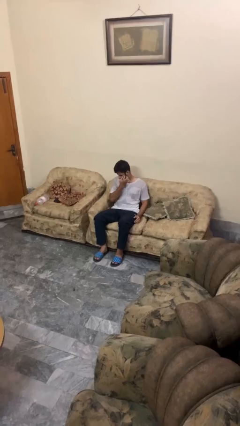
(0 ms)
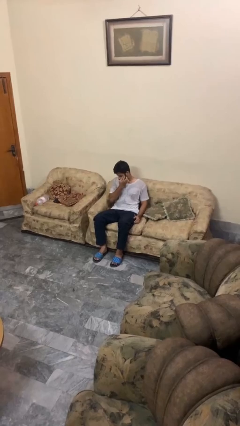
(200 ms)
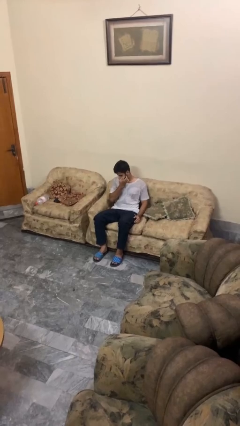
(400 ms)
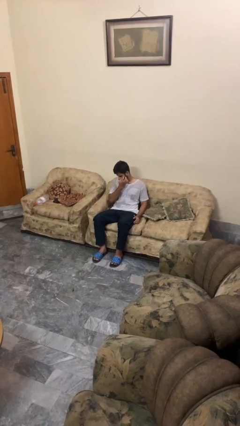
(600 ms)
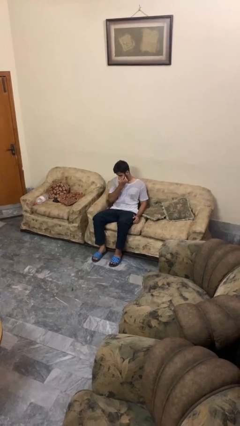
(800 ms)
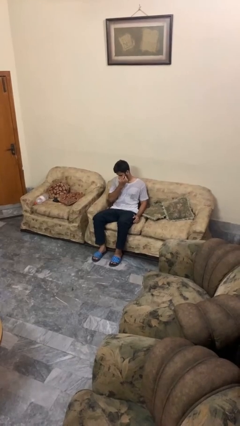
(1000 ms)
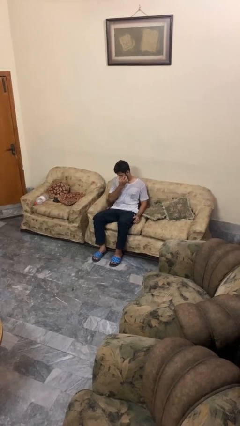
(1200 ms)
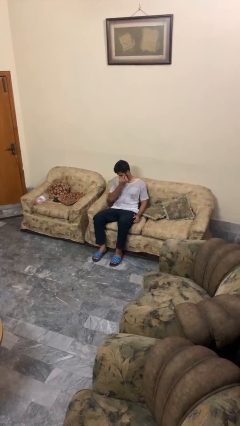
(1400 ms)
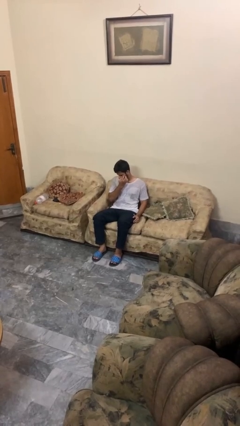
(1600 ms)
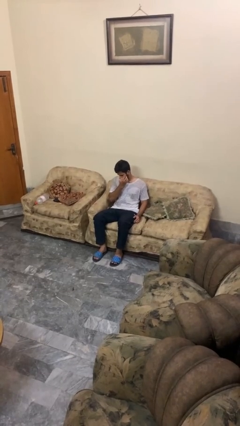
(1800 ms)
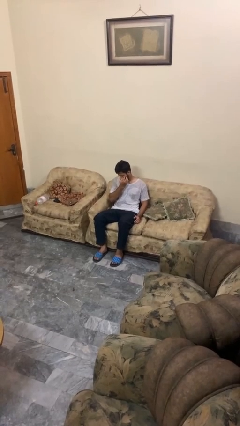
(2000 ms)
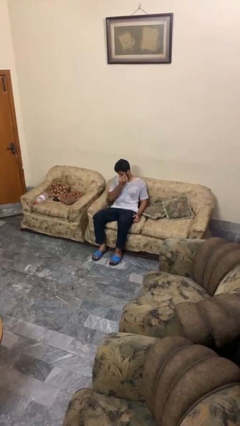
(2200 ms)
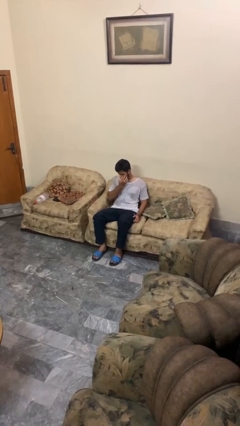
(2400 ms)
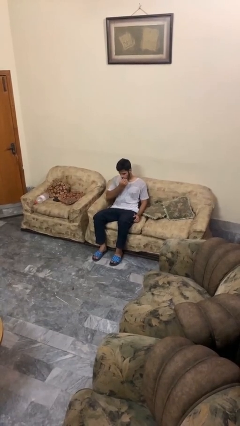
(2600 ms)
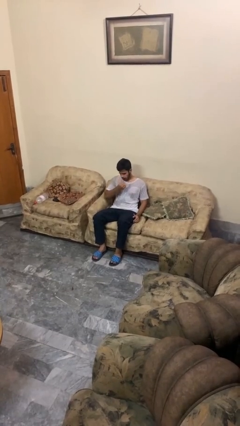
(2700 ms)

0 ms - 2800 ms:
person scratches face

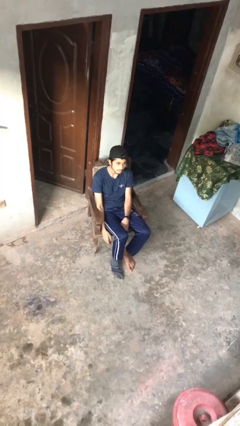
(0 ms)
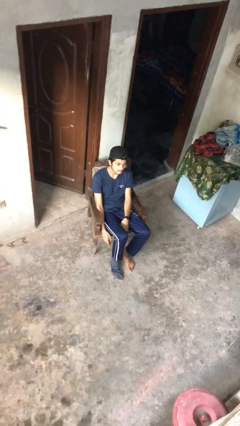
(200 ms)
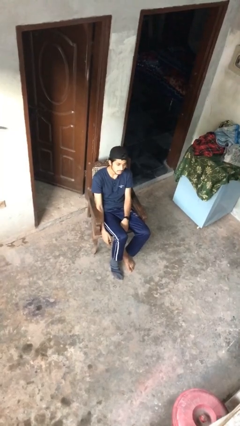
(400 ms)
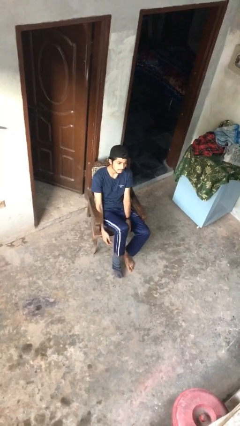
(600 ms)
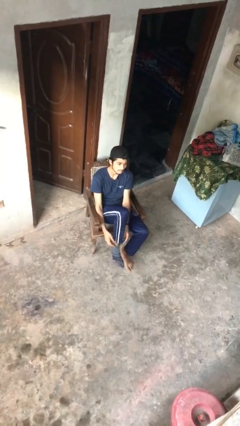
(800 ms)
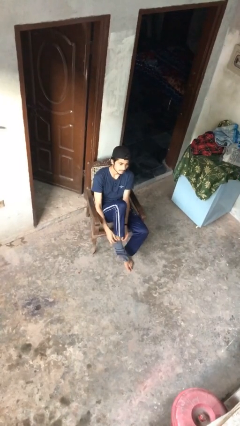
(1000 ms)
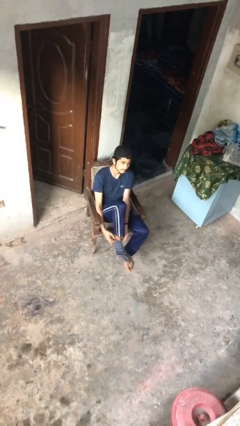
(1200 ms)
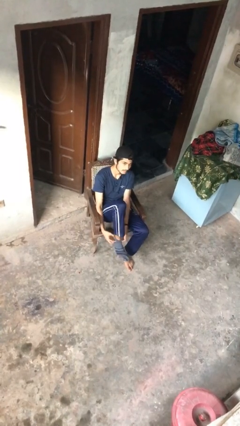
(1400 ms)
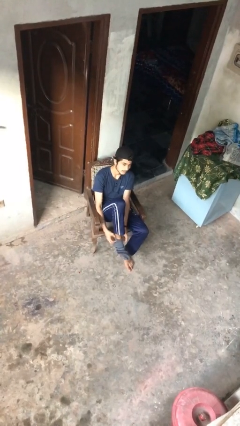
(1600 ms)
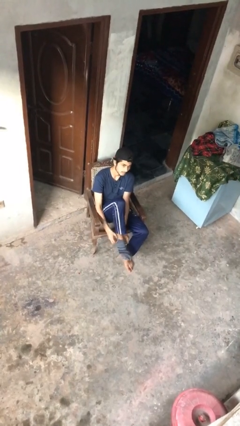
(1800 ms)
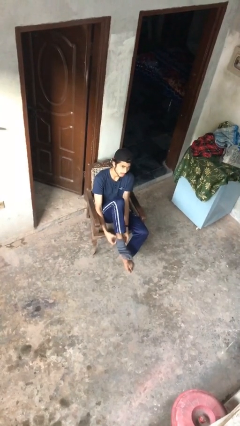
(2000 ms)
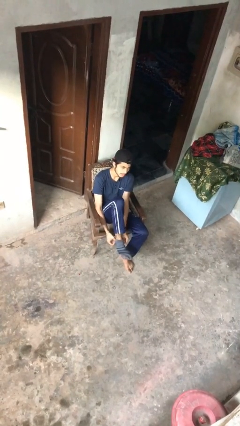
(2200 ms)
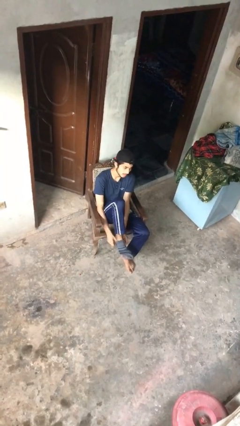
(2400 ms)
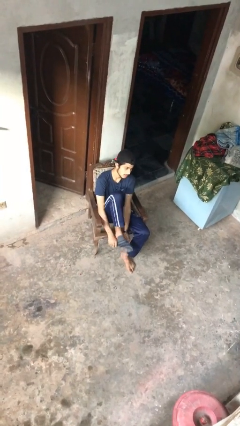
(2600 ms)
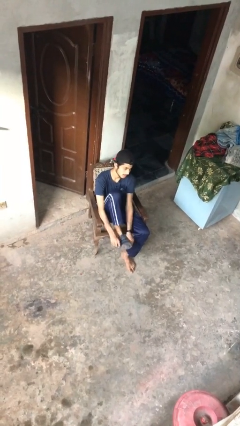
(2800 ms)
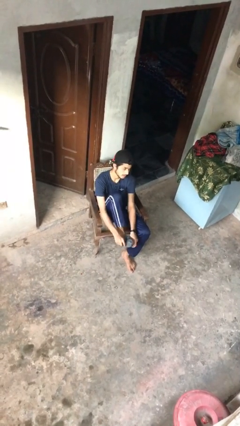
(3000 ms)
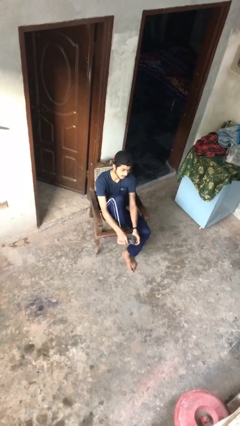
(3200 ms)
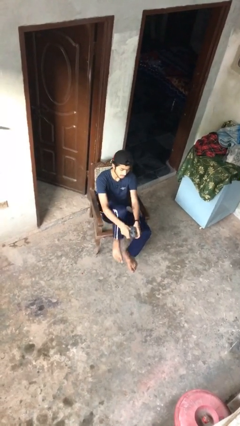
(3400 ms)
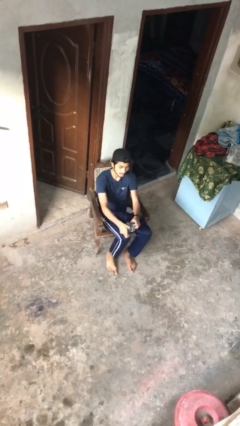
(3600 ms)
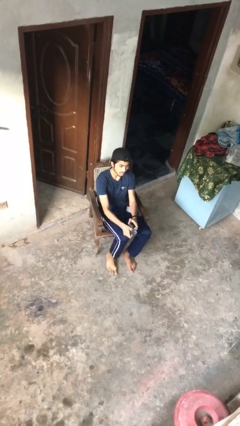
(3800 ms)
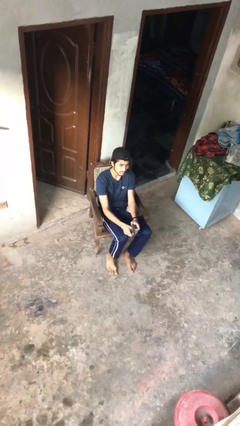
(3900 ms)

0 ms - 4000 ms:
person takes off socks

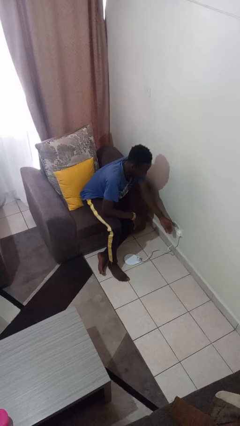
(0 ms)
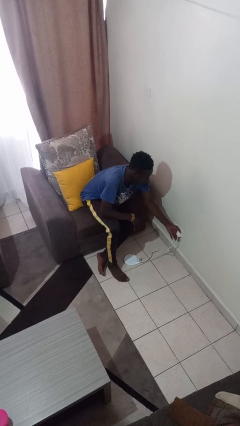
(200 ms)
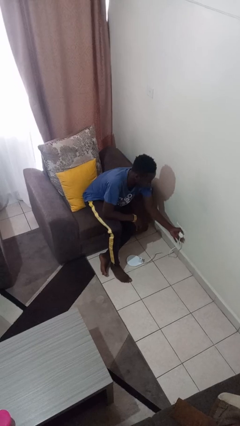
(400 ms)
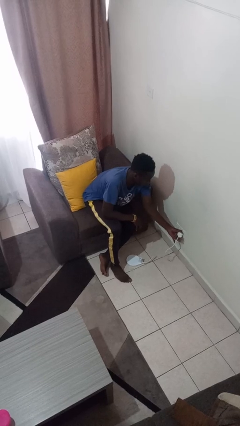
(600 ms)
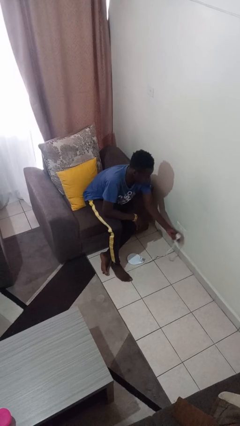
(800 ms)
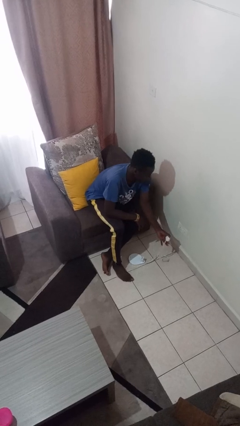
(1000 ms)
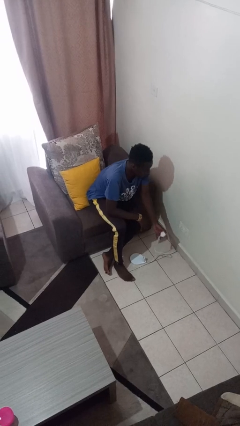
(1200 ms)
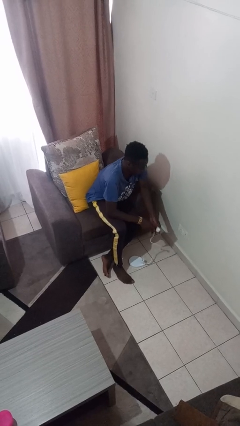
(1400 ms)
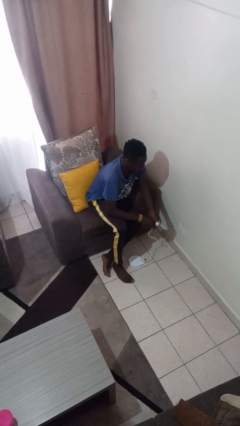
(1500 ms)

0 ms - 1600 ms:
person unplugs from electrical socket

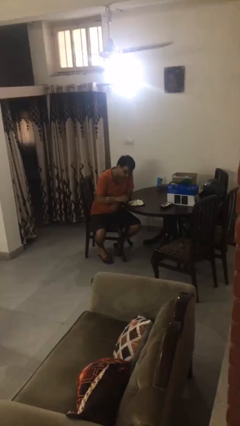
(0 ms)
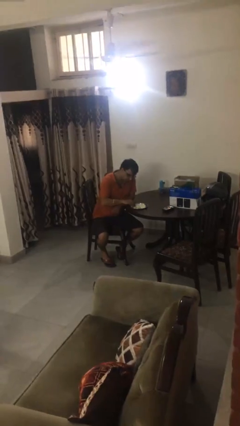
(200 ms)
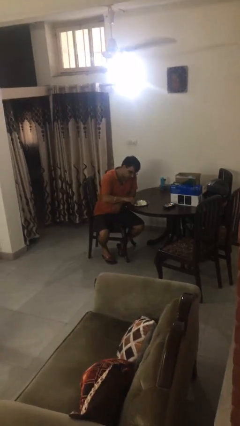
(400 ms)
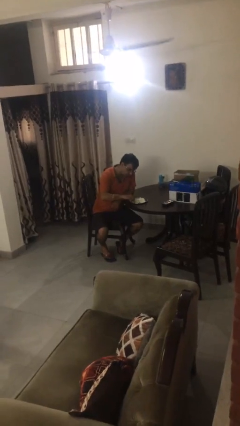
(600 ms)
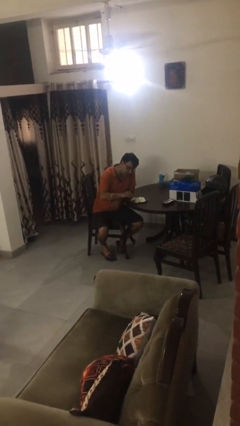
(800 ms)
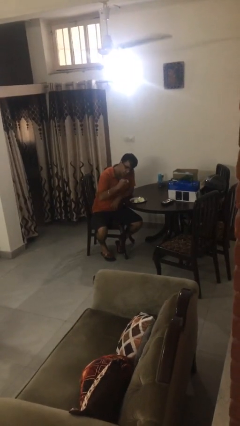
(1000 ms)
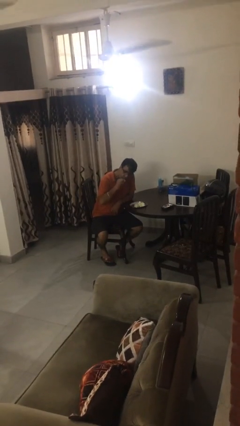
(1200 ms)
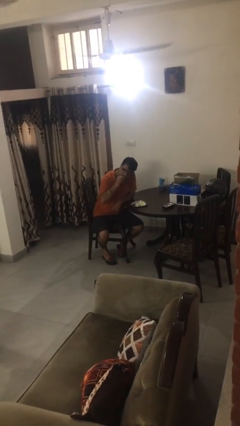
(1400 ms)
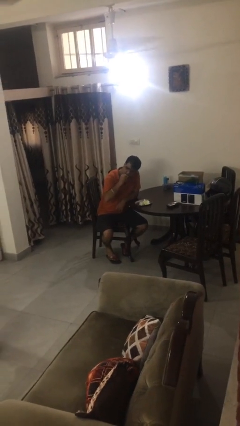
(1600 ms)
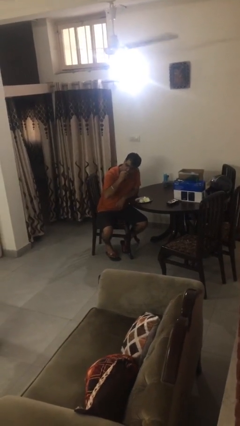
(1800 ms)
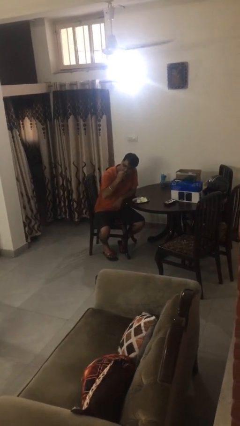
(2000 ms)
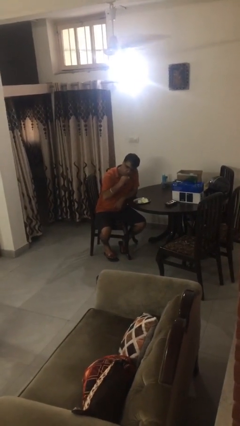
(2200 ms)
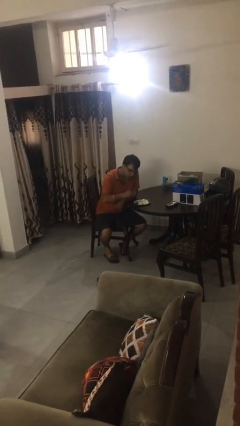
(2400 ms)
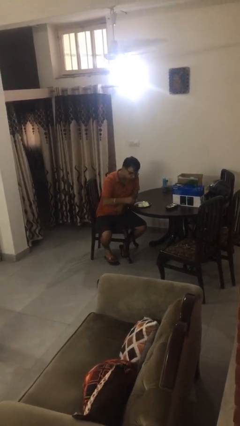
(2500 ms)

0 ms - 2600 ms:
person eats with hands

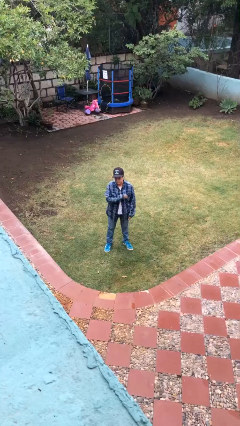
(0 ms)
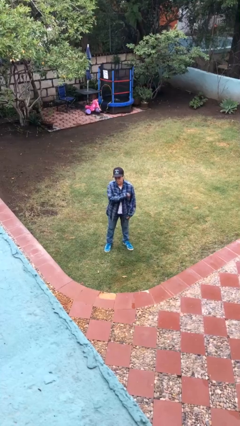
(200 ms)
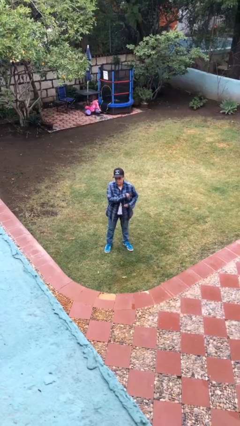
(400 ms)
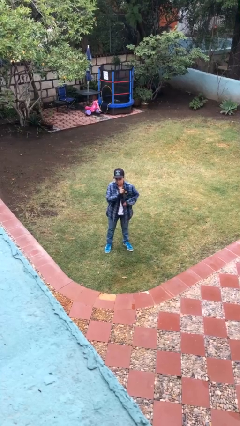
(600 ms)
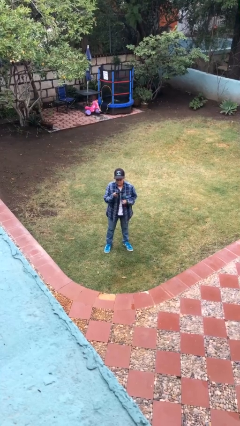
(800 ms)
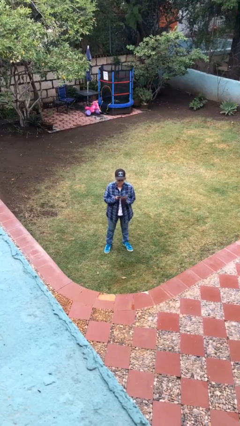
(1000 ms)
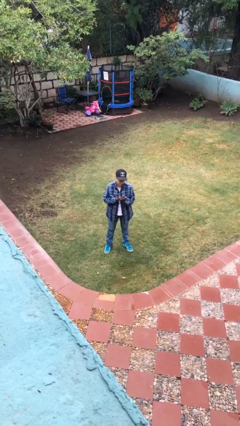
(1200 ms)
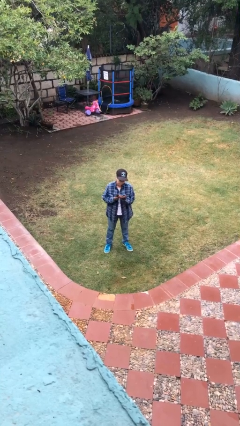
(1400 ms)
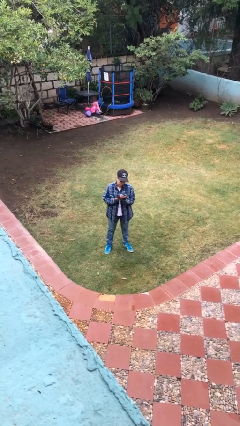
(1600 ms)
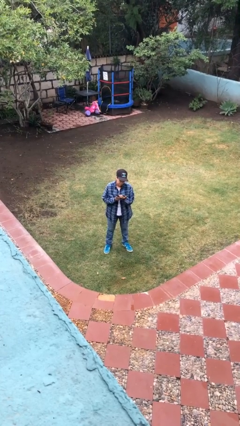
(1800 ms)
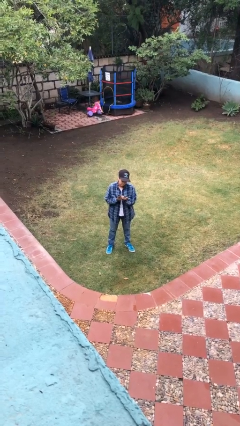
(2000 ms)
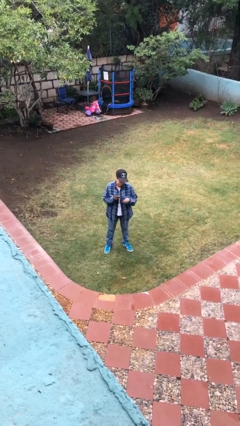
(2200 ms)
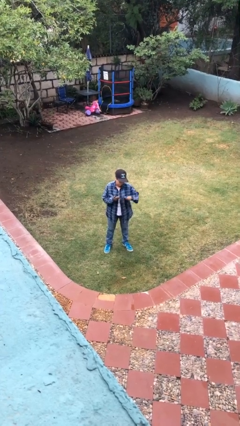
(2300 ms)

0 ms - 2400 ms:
person takes phone from pocket

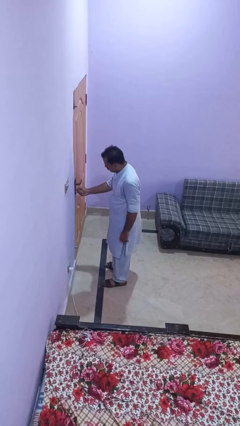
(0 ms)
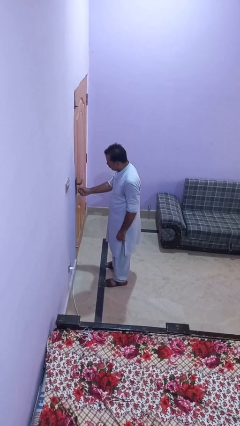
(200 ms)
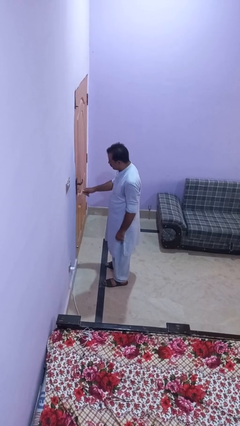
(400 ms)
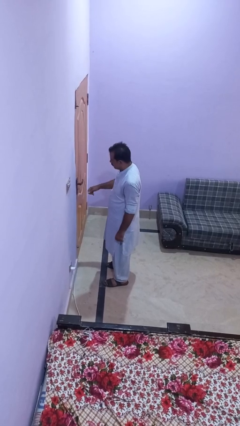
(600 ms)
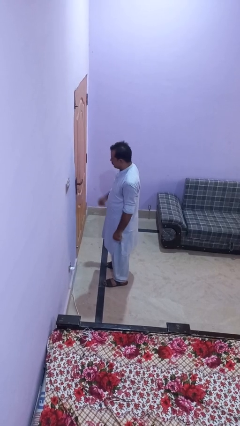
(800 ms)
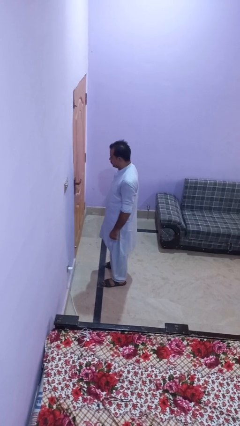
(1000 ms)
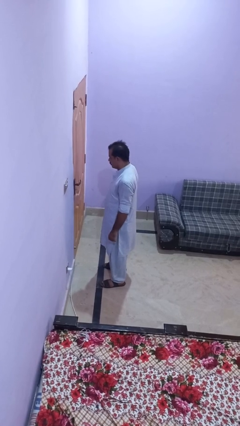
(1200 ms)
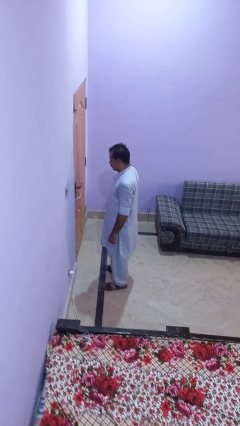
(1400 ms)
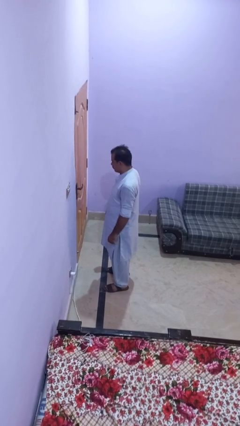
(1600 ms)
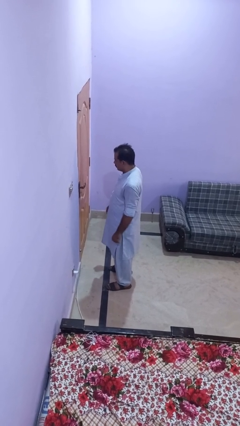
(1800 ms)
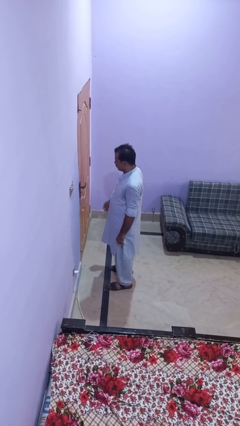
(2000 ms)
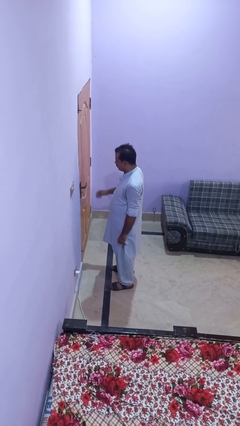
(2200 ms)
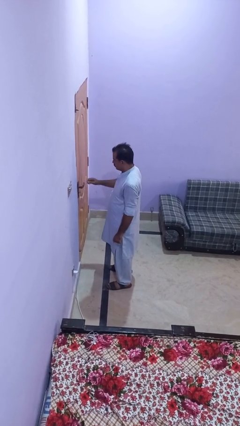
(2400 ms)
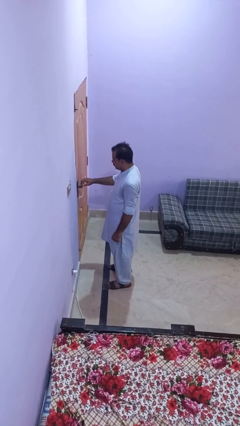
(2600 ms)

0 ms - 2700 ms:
person unlocks door with keys

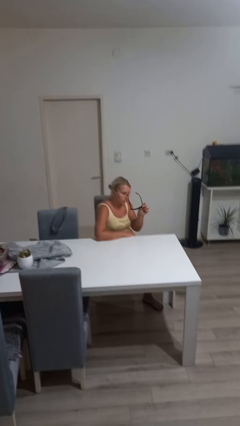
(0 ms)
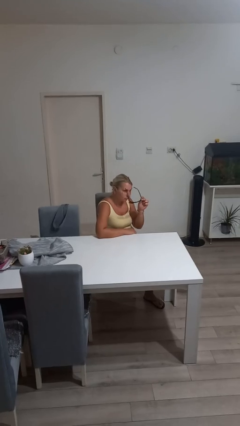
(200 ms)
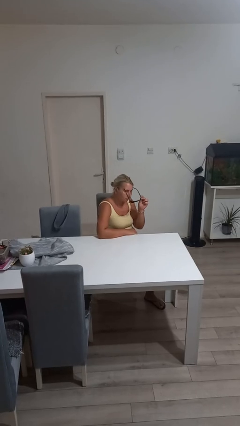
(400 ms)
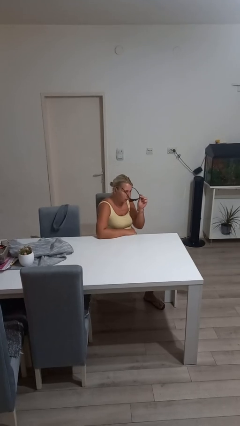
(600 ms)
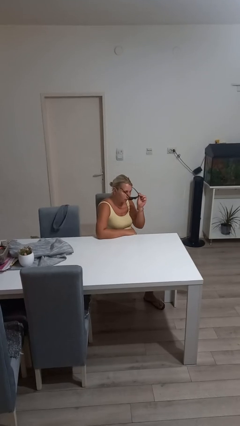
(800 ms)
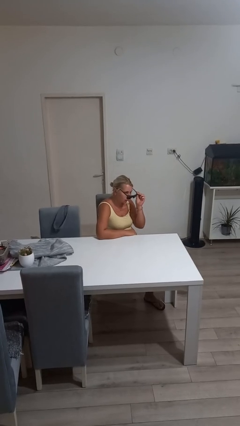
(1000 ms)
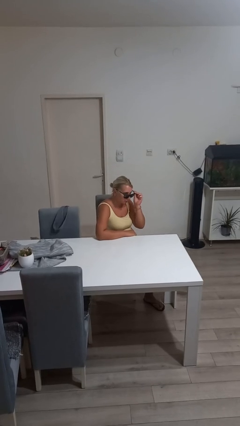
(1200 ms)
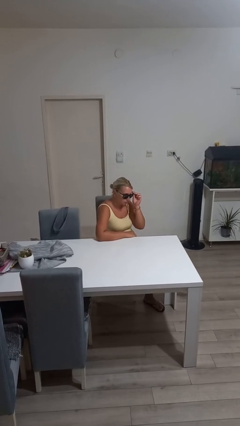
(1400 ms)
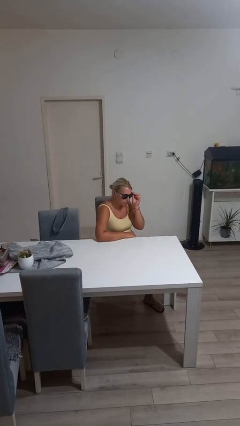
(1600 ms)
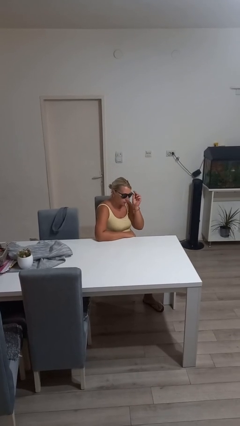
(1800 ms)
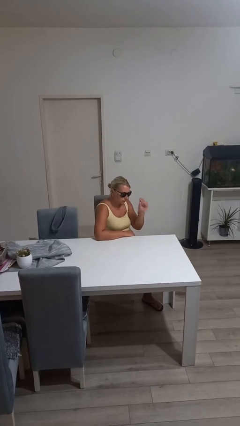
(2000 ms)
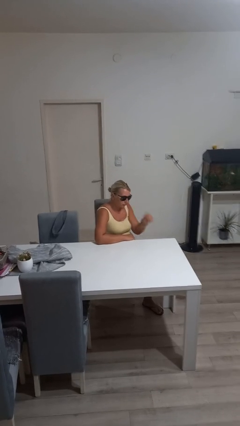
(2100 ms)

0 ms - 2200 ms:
person puts on sunglasses
